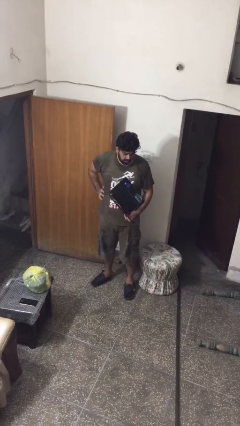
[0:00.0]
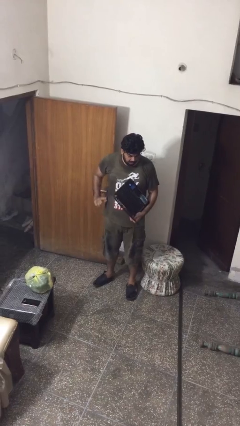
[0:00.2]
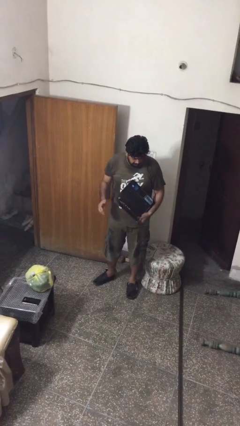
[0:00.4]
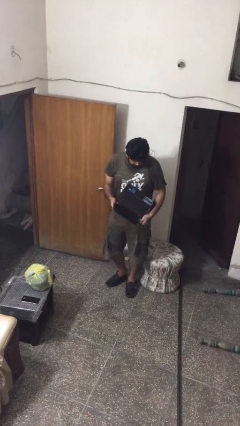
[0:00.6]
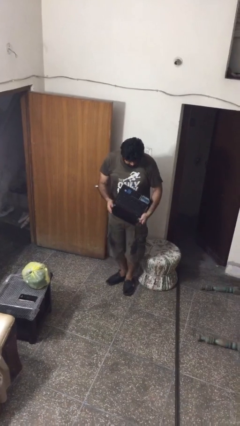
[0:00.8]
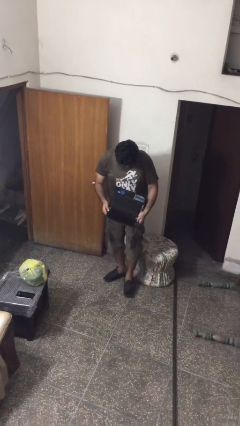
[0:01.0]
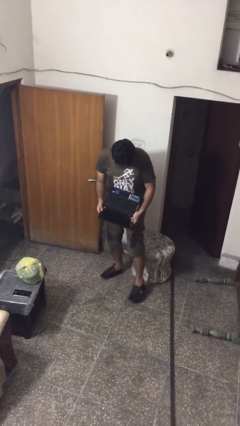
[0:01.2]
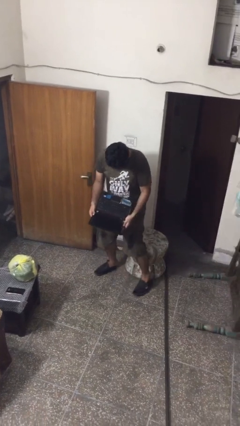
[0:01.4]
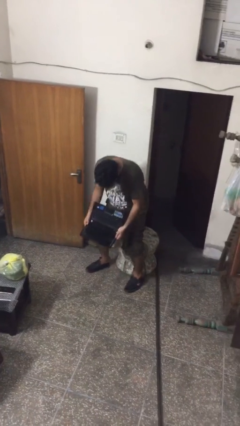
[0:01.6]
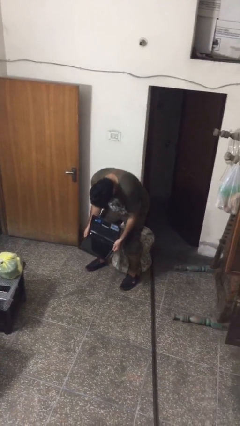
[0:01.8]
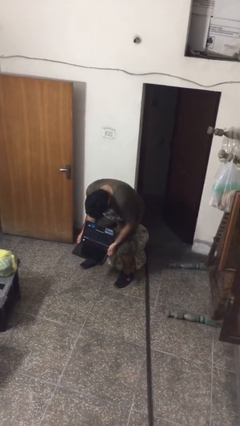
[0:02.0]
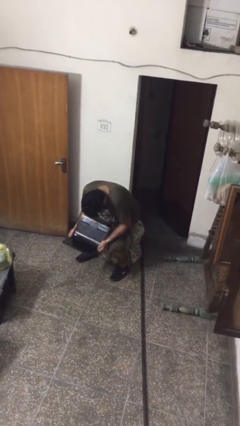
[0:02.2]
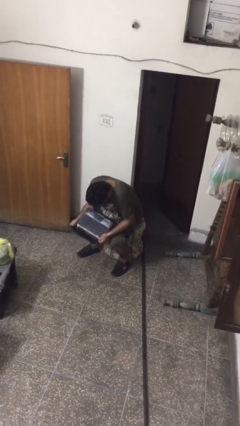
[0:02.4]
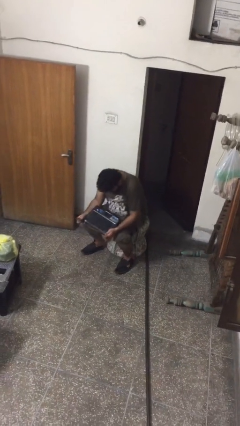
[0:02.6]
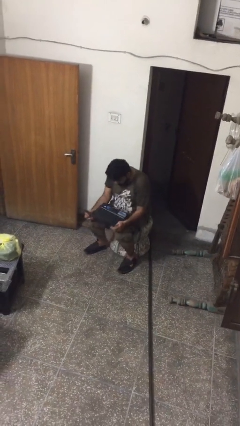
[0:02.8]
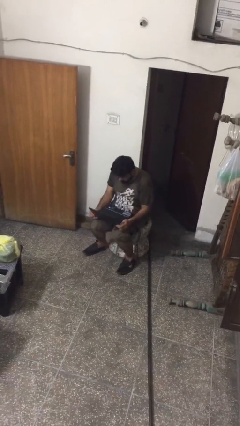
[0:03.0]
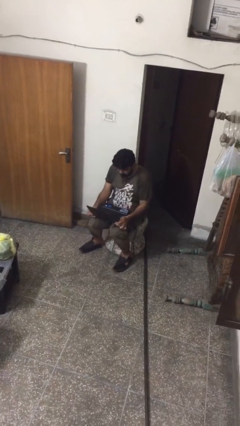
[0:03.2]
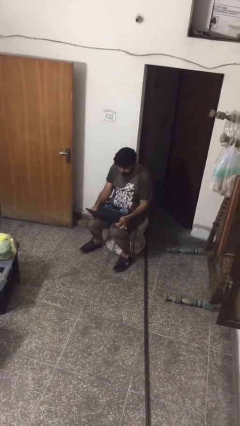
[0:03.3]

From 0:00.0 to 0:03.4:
person sits down

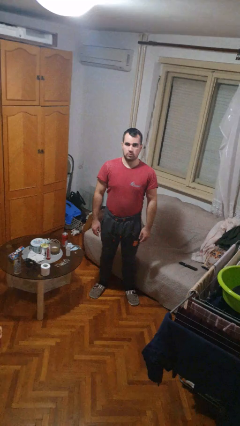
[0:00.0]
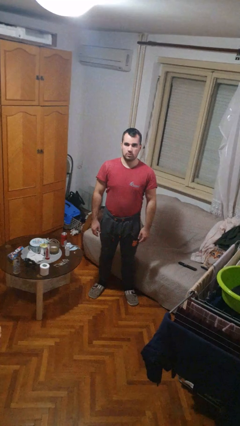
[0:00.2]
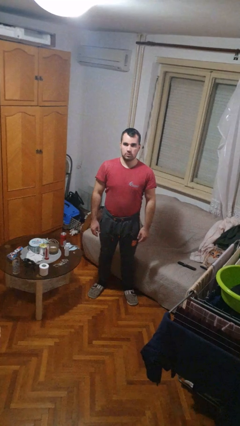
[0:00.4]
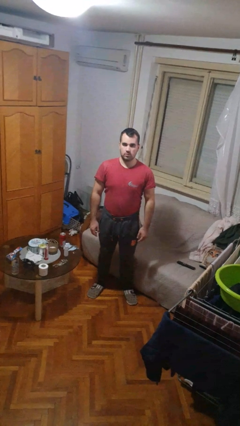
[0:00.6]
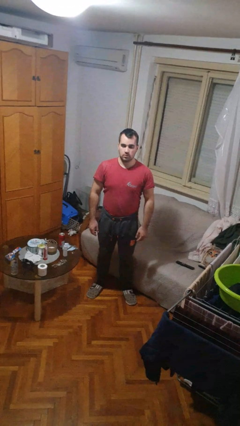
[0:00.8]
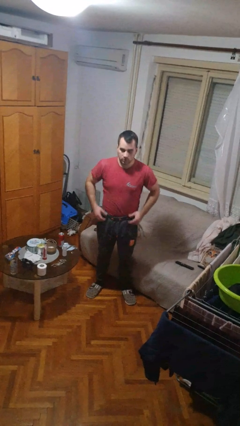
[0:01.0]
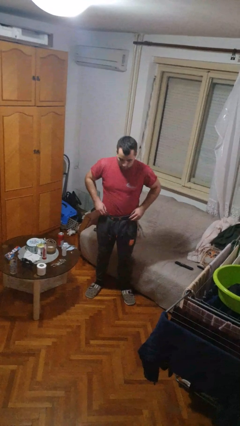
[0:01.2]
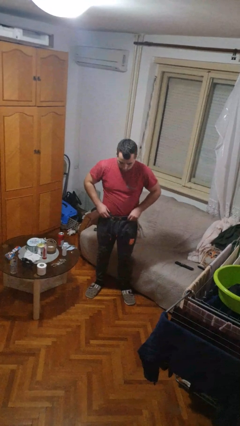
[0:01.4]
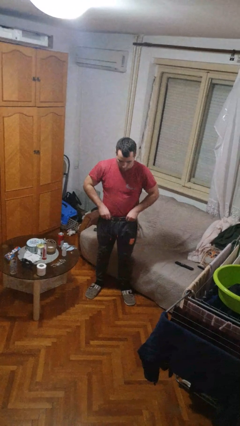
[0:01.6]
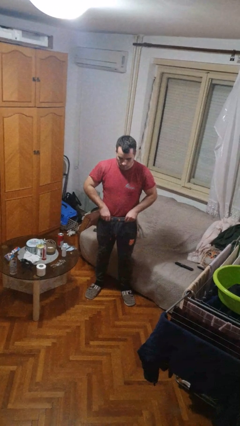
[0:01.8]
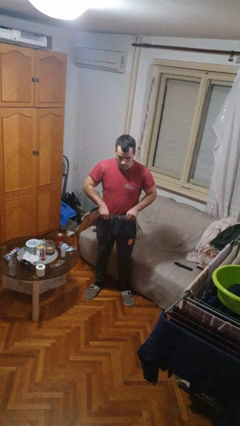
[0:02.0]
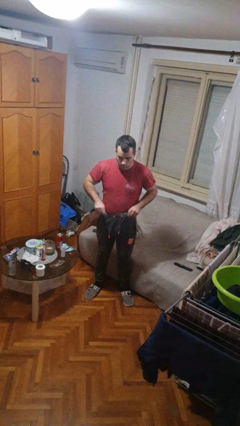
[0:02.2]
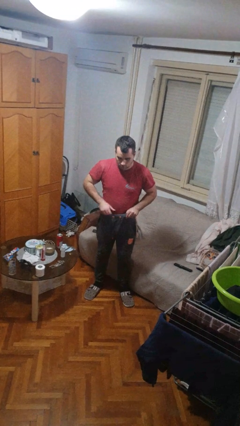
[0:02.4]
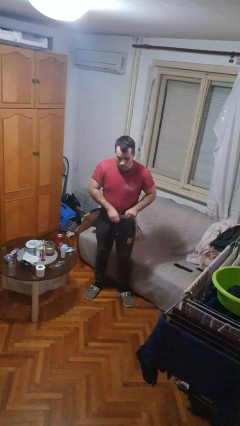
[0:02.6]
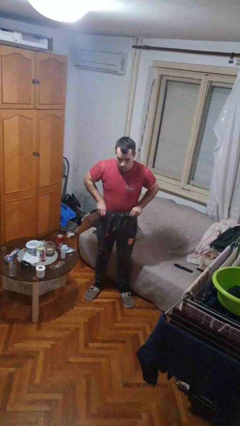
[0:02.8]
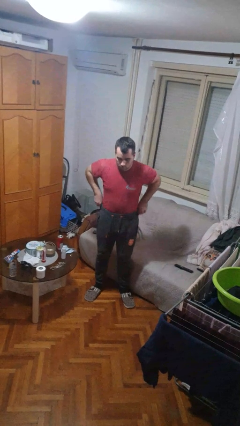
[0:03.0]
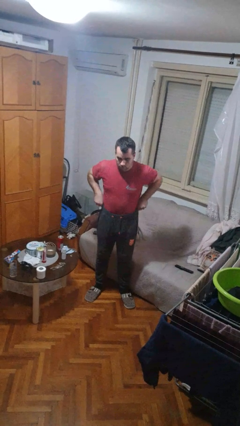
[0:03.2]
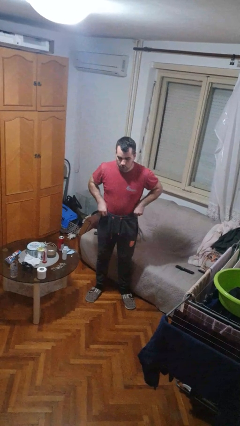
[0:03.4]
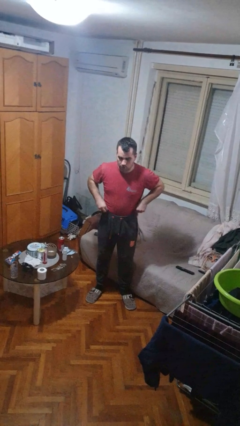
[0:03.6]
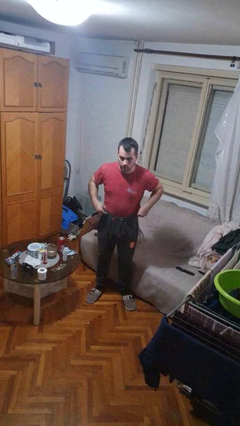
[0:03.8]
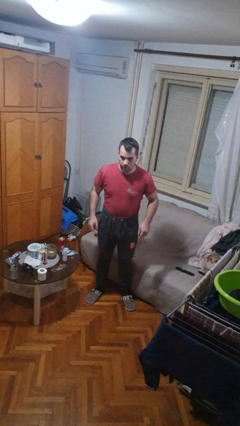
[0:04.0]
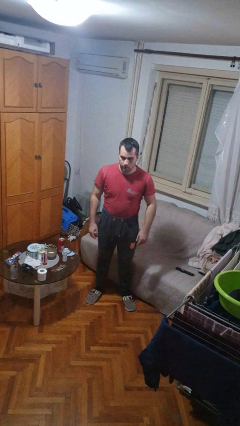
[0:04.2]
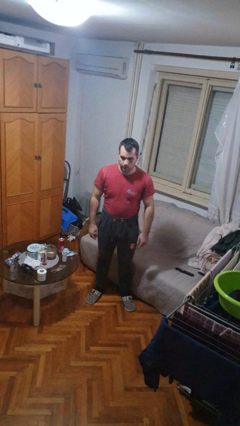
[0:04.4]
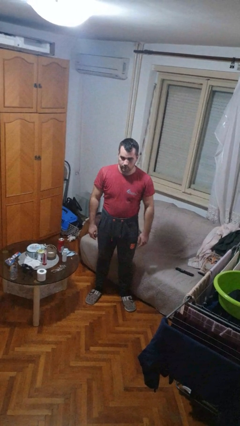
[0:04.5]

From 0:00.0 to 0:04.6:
person hikes up pants

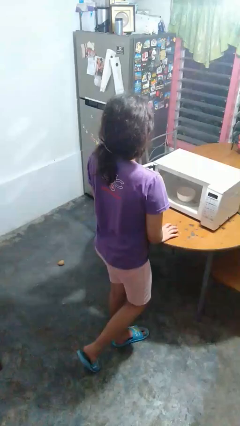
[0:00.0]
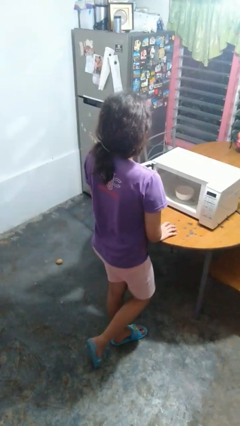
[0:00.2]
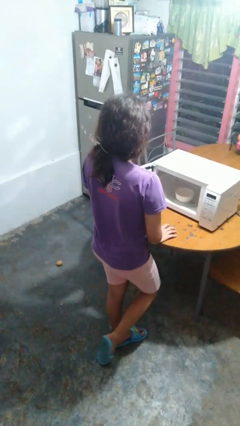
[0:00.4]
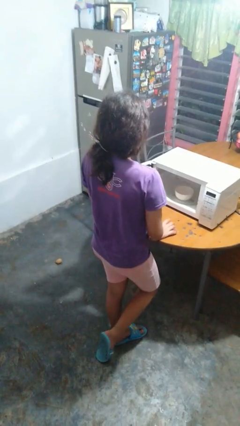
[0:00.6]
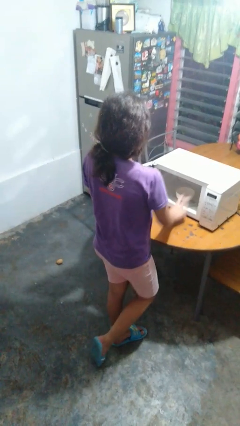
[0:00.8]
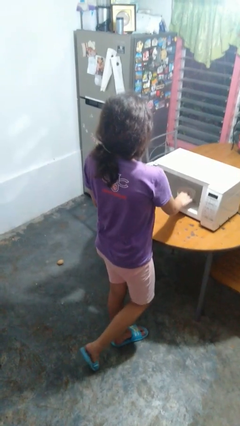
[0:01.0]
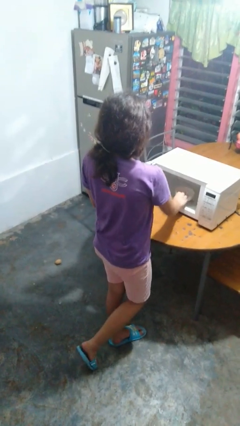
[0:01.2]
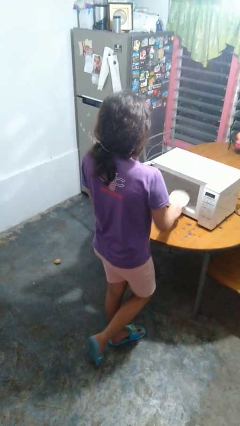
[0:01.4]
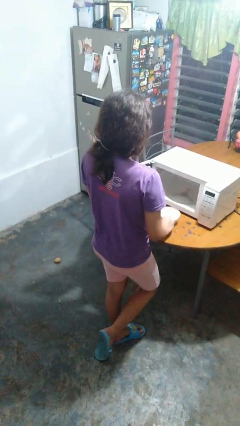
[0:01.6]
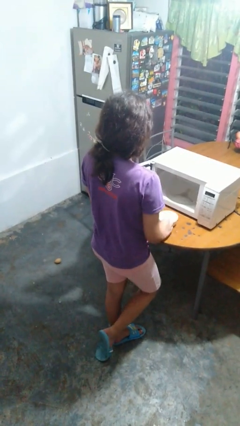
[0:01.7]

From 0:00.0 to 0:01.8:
person takes object from microwave

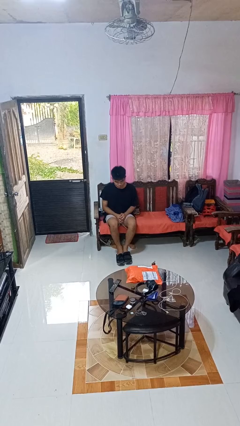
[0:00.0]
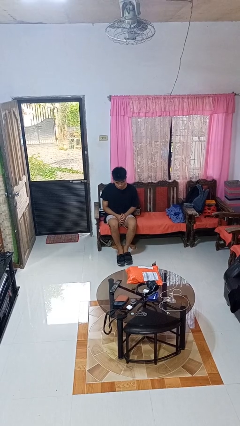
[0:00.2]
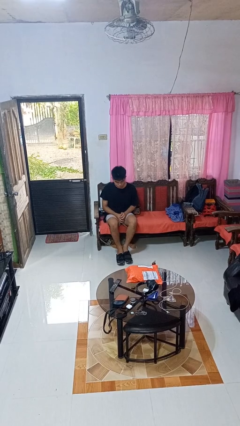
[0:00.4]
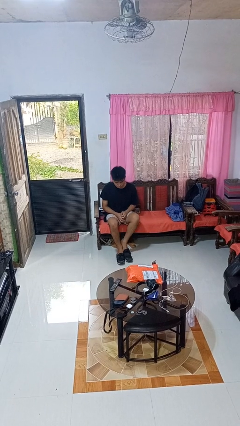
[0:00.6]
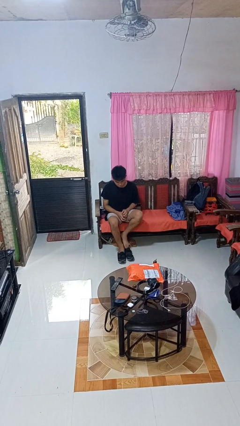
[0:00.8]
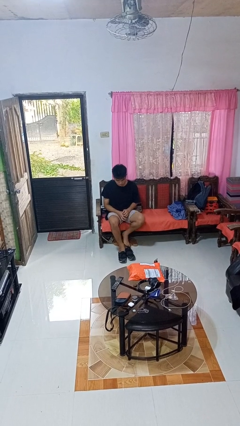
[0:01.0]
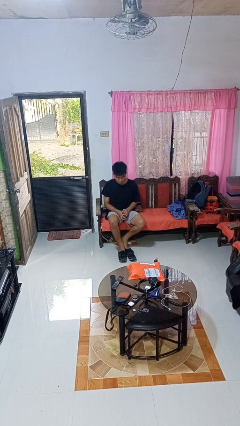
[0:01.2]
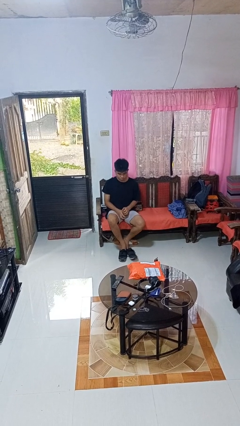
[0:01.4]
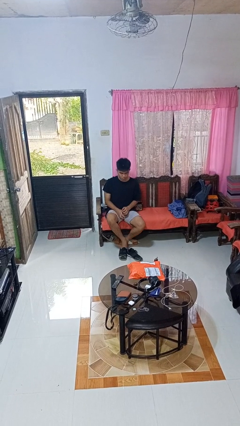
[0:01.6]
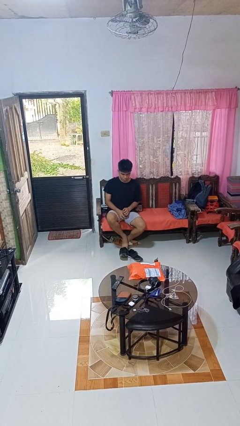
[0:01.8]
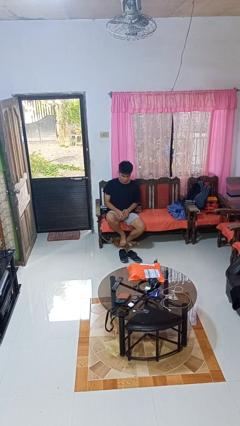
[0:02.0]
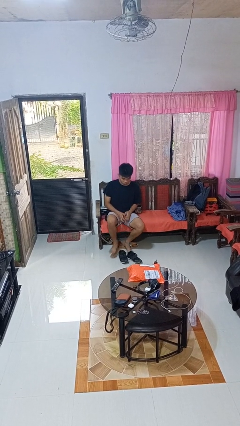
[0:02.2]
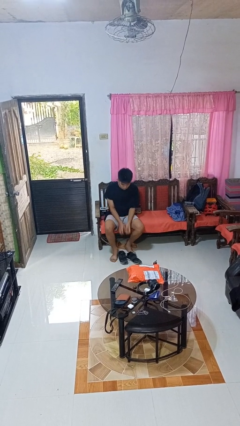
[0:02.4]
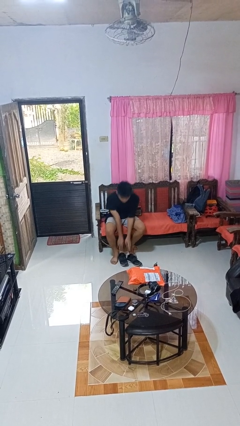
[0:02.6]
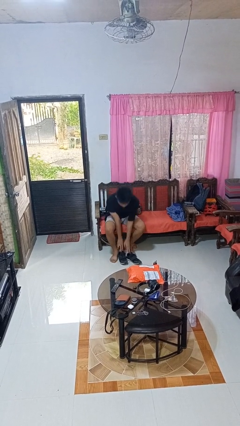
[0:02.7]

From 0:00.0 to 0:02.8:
person takes off shoes

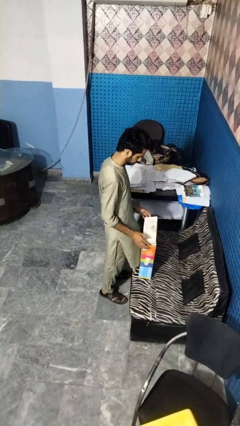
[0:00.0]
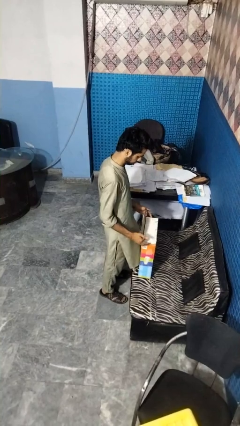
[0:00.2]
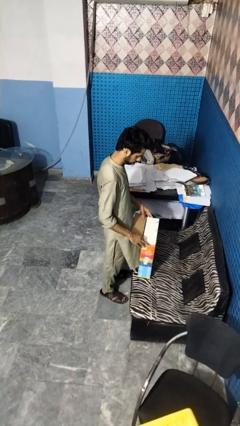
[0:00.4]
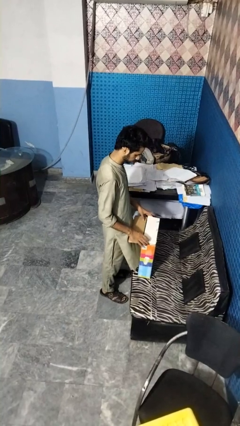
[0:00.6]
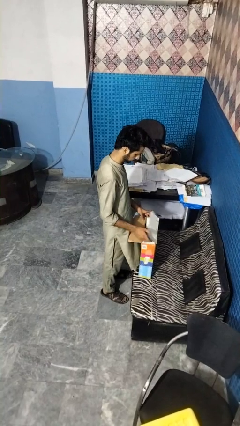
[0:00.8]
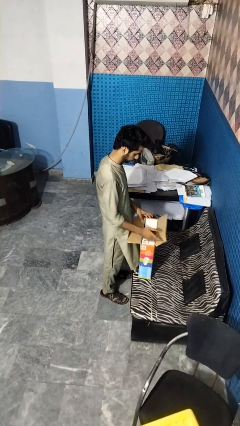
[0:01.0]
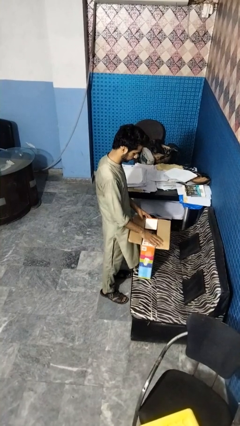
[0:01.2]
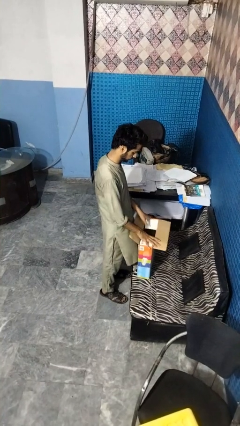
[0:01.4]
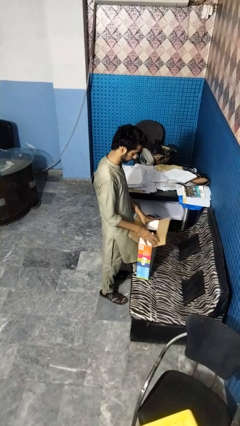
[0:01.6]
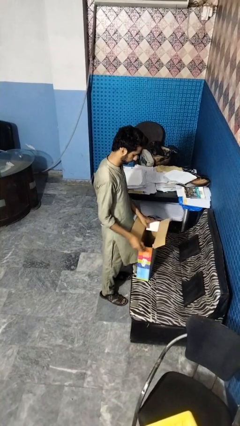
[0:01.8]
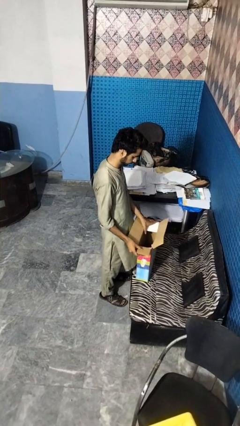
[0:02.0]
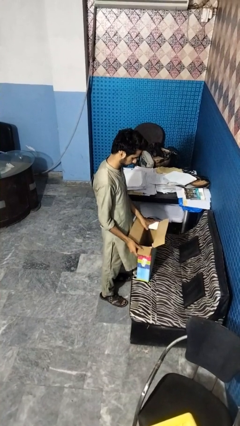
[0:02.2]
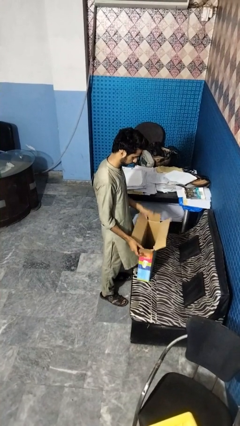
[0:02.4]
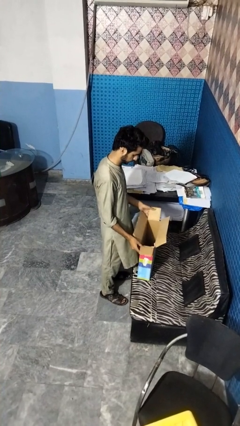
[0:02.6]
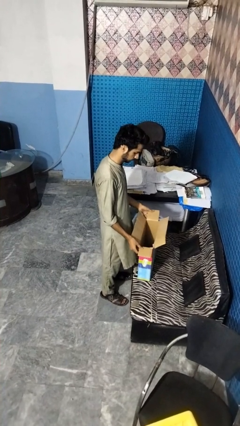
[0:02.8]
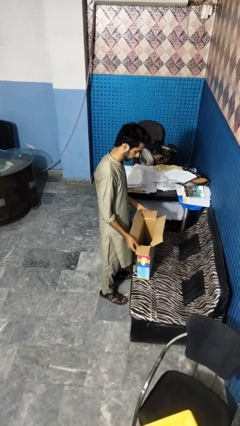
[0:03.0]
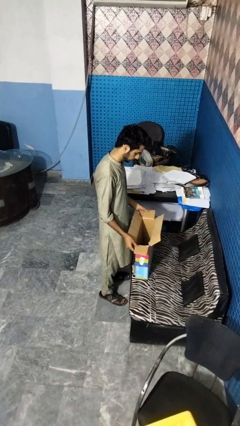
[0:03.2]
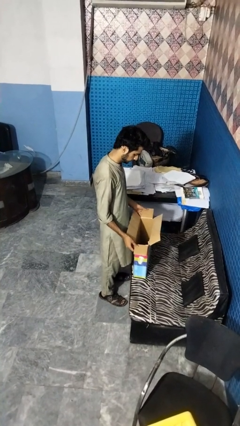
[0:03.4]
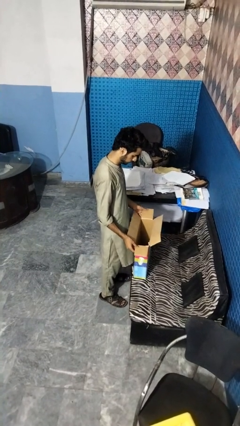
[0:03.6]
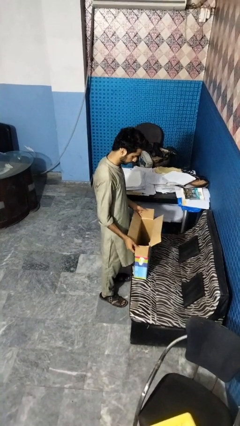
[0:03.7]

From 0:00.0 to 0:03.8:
person opens box

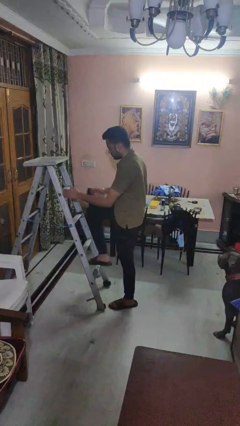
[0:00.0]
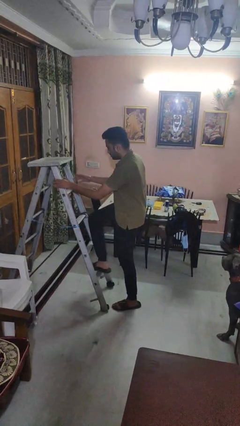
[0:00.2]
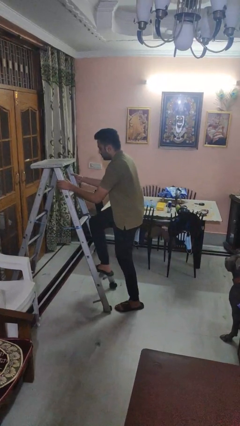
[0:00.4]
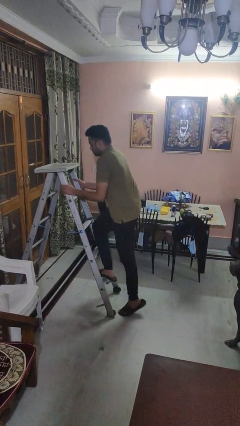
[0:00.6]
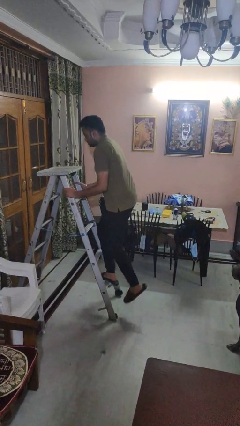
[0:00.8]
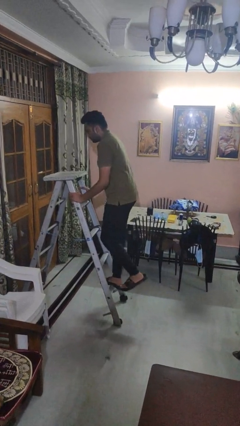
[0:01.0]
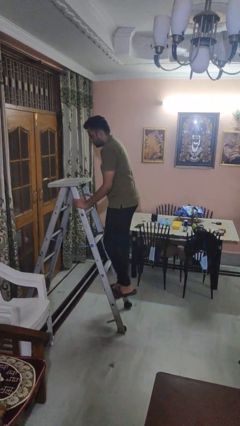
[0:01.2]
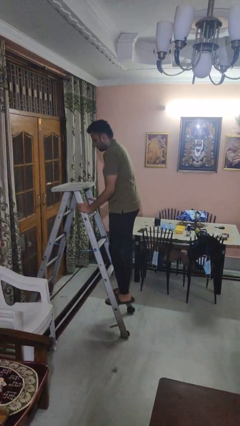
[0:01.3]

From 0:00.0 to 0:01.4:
person climbs up ladder
